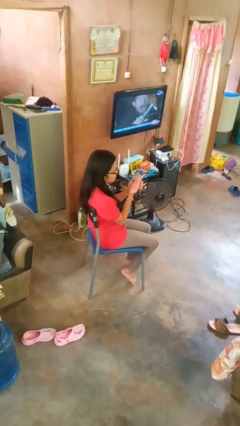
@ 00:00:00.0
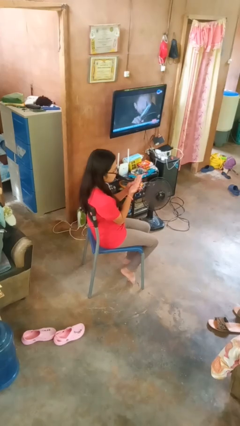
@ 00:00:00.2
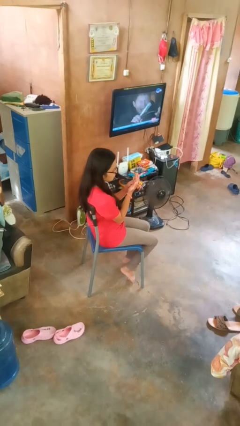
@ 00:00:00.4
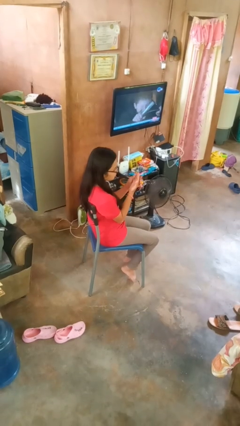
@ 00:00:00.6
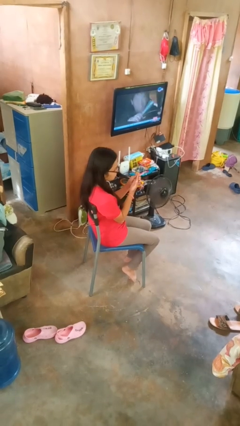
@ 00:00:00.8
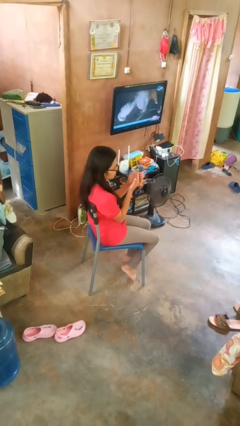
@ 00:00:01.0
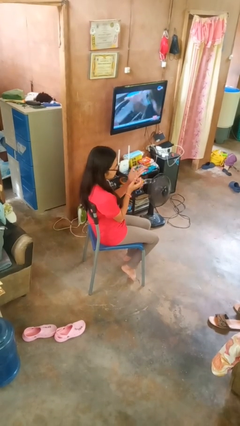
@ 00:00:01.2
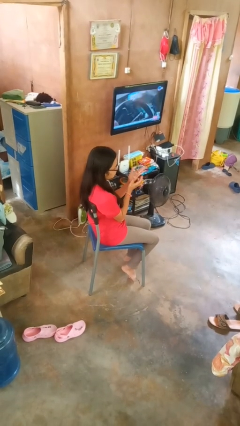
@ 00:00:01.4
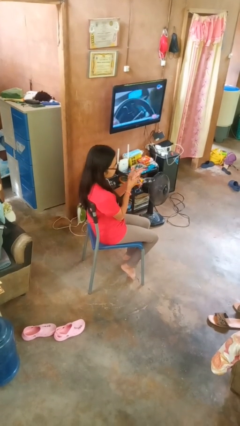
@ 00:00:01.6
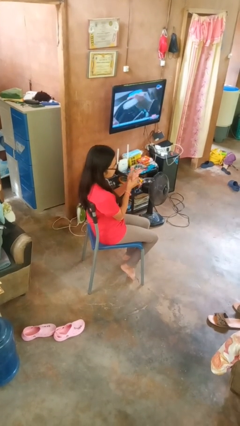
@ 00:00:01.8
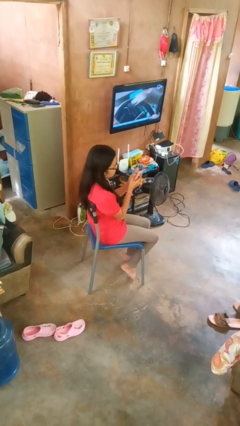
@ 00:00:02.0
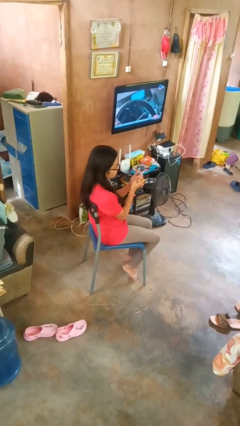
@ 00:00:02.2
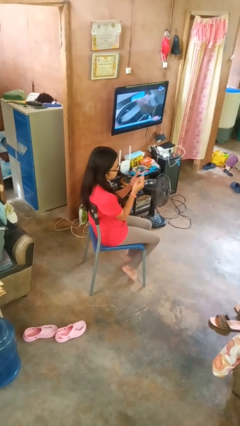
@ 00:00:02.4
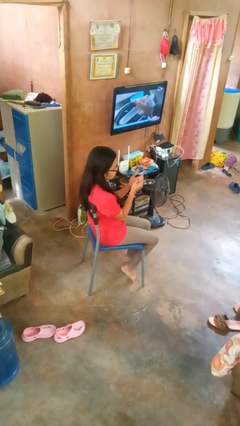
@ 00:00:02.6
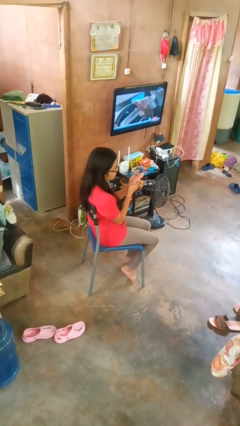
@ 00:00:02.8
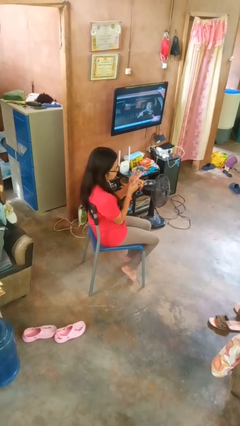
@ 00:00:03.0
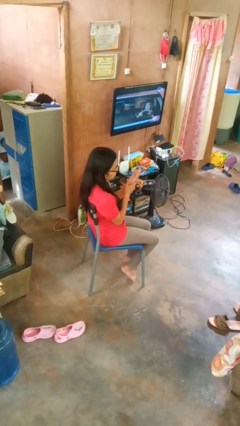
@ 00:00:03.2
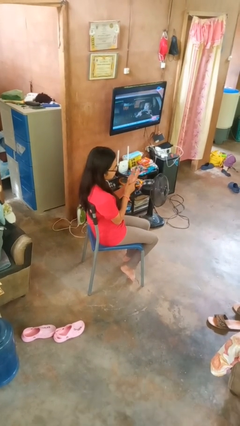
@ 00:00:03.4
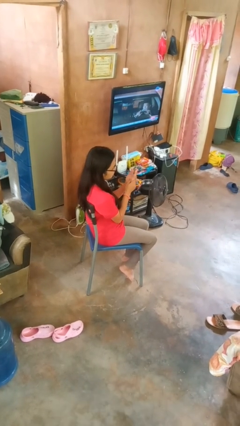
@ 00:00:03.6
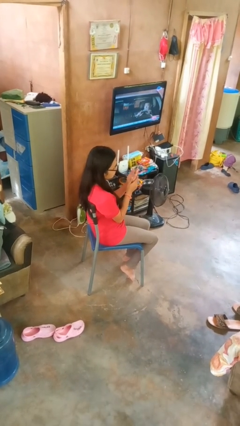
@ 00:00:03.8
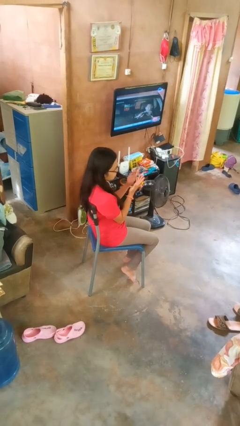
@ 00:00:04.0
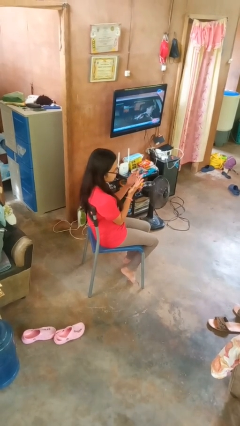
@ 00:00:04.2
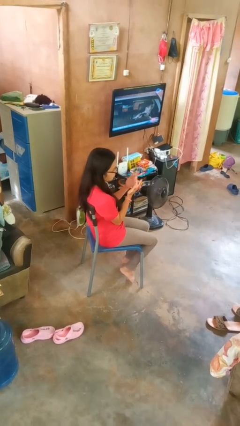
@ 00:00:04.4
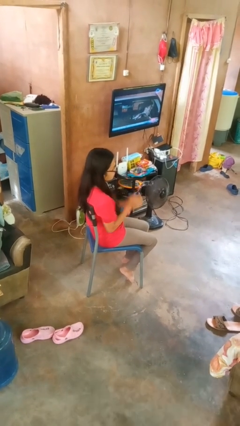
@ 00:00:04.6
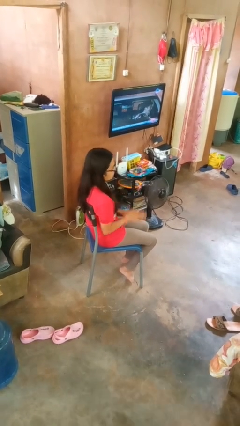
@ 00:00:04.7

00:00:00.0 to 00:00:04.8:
person looks at hands in lap

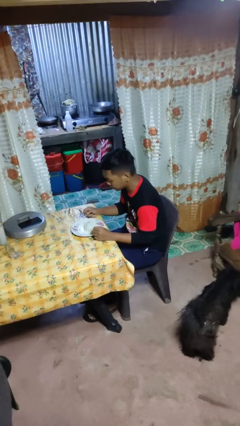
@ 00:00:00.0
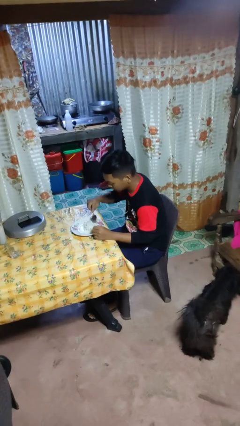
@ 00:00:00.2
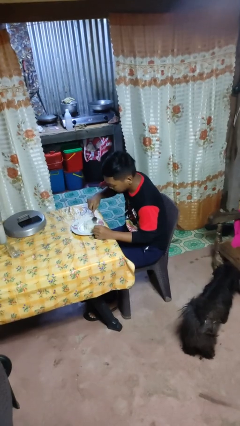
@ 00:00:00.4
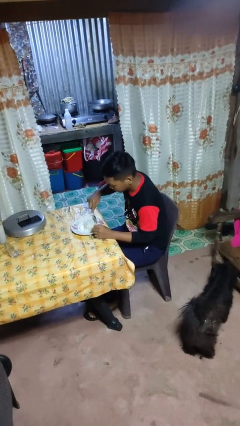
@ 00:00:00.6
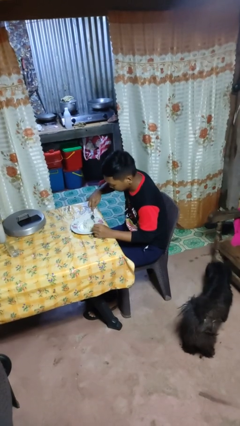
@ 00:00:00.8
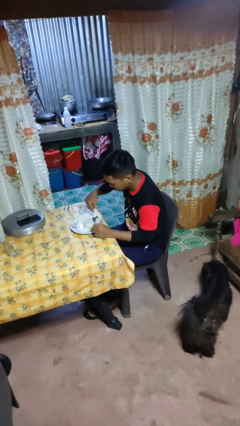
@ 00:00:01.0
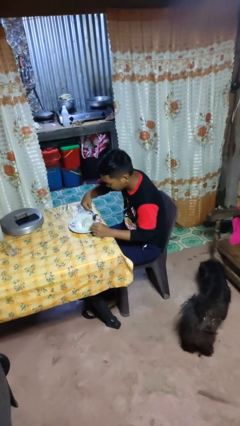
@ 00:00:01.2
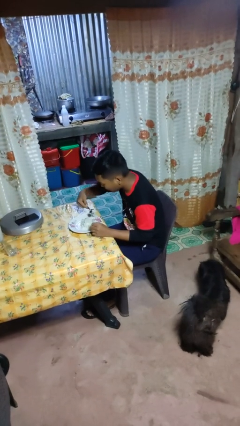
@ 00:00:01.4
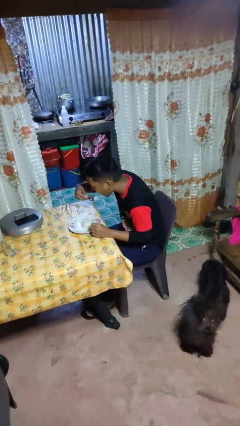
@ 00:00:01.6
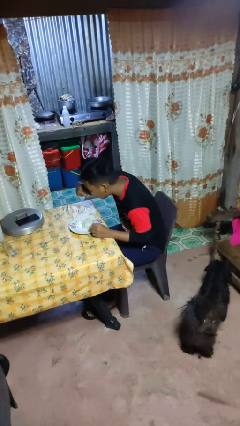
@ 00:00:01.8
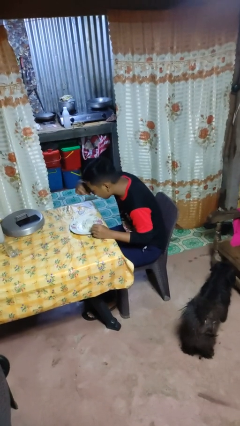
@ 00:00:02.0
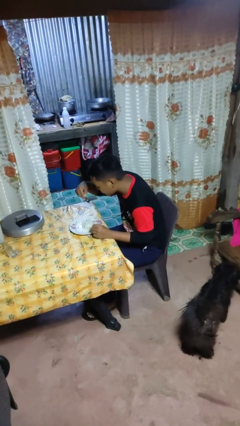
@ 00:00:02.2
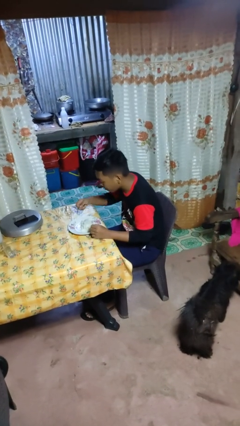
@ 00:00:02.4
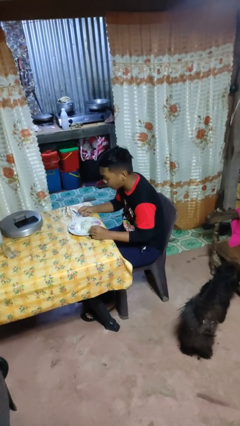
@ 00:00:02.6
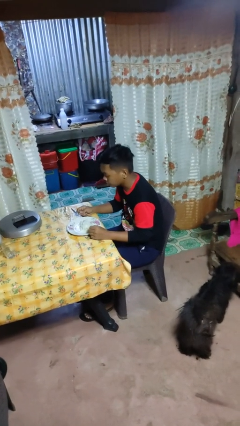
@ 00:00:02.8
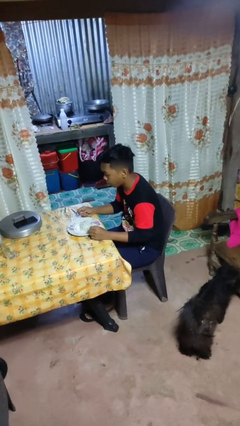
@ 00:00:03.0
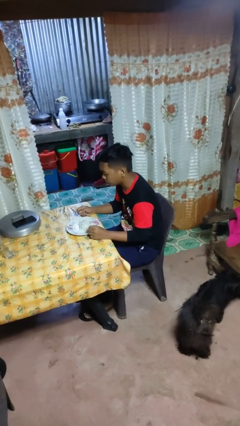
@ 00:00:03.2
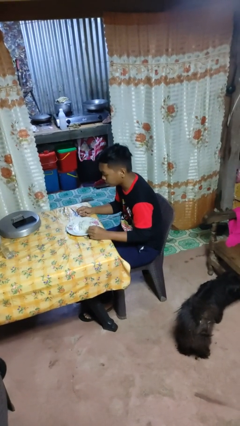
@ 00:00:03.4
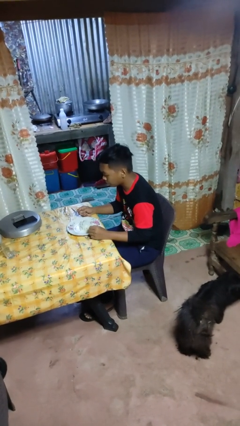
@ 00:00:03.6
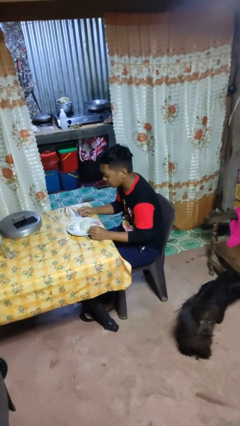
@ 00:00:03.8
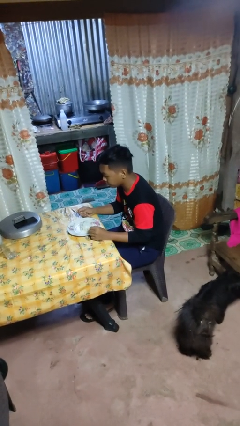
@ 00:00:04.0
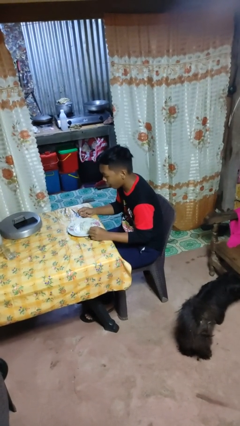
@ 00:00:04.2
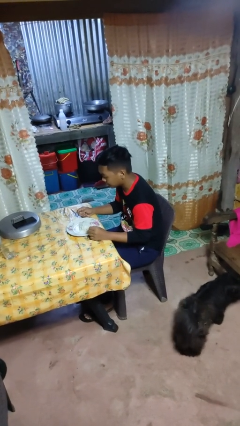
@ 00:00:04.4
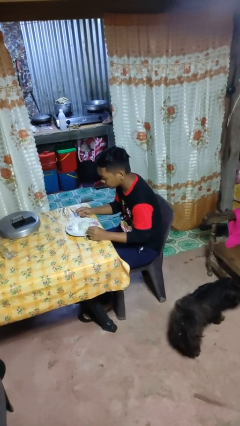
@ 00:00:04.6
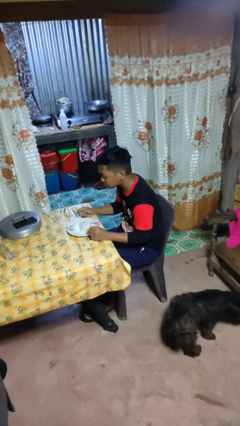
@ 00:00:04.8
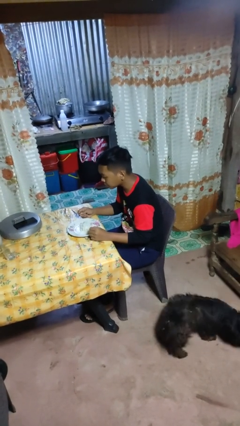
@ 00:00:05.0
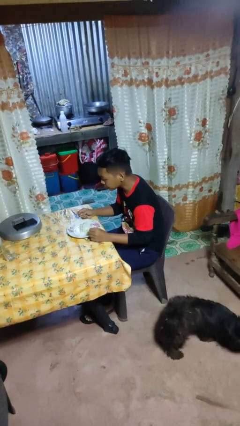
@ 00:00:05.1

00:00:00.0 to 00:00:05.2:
person eats with utensil

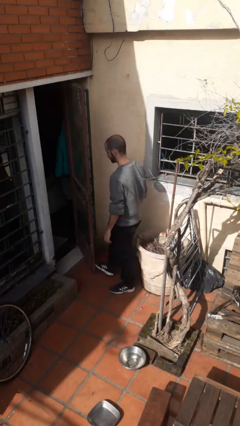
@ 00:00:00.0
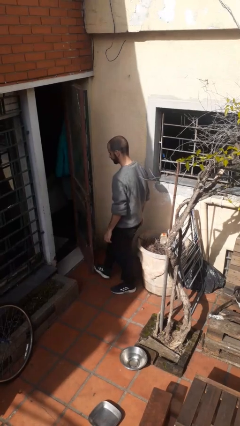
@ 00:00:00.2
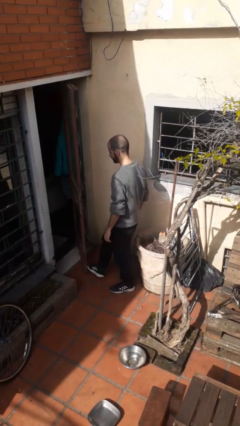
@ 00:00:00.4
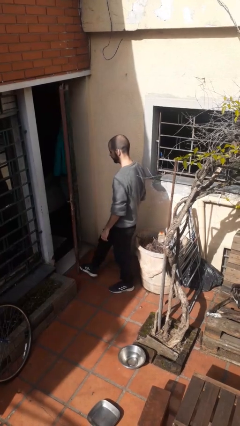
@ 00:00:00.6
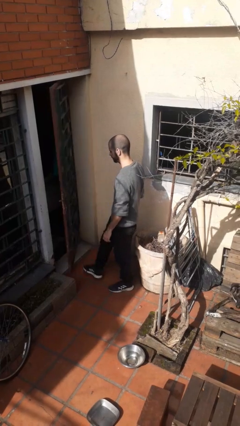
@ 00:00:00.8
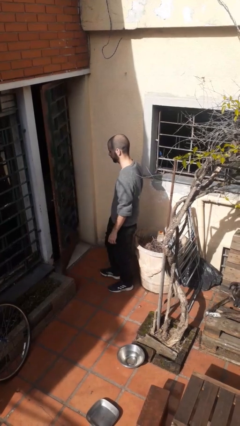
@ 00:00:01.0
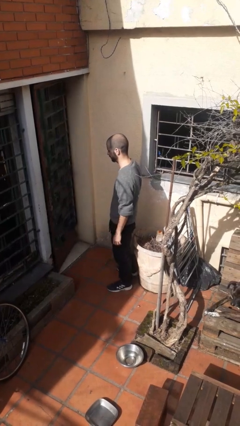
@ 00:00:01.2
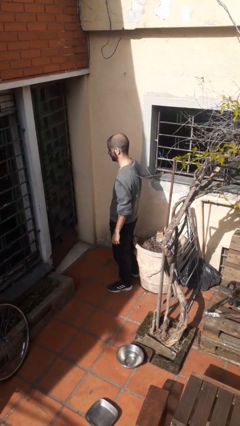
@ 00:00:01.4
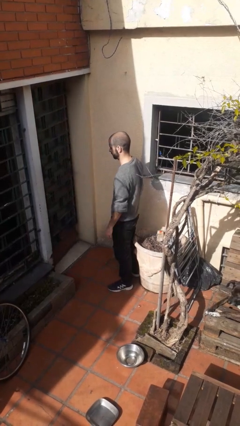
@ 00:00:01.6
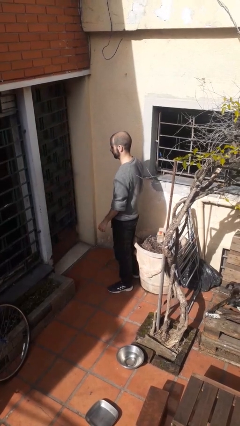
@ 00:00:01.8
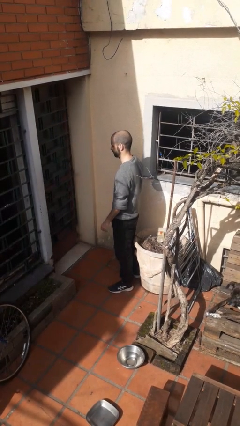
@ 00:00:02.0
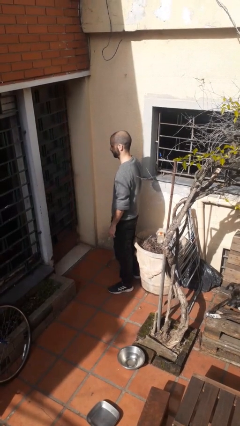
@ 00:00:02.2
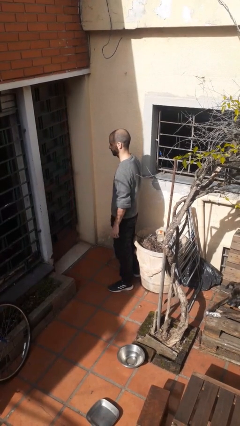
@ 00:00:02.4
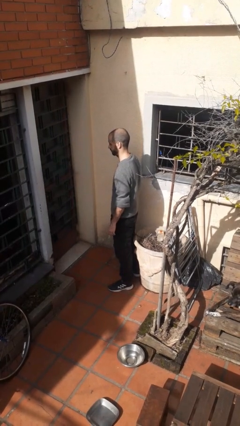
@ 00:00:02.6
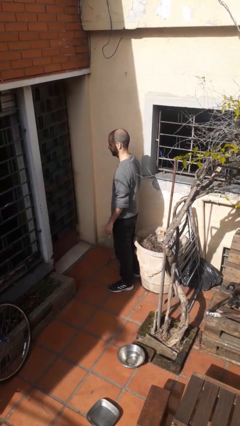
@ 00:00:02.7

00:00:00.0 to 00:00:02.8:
person closes door with foot

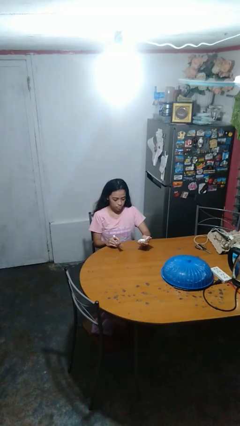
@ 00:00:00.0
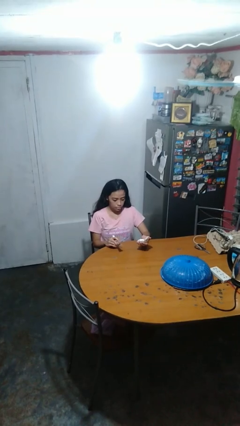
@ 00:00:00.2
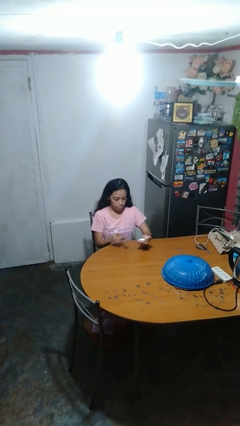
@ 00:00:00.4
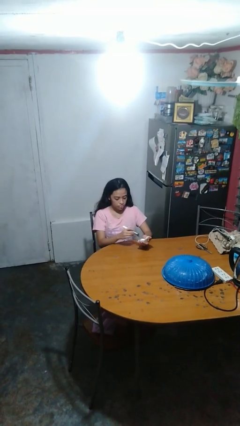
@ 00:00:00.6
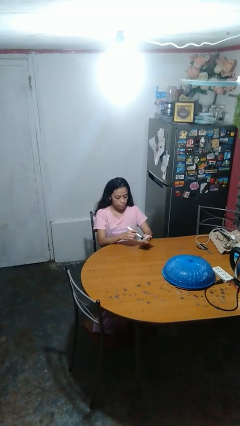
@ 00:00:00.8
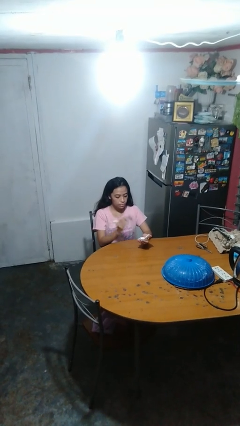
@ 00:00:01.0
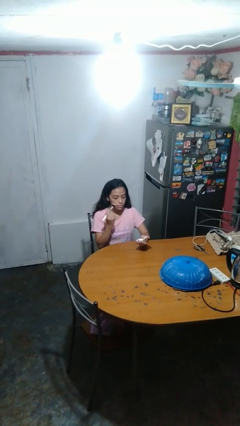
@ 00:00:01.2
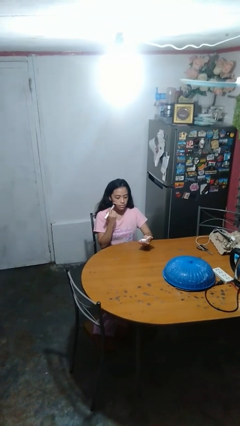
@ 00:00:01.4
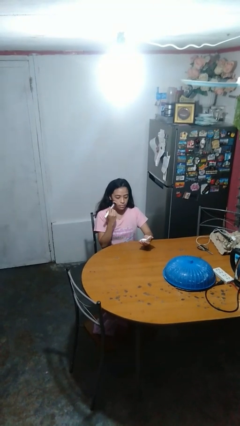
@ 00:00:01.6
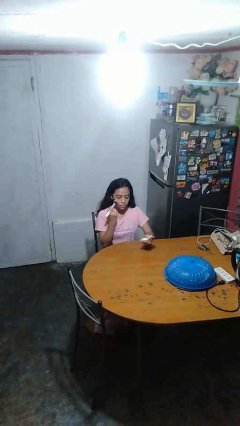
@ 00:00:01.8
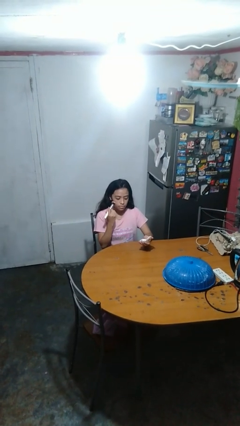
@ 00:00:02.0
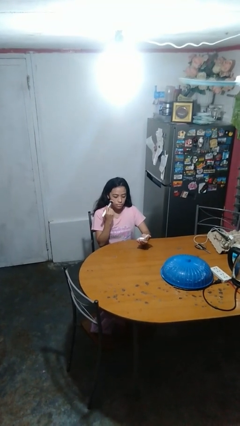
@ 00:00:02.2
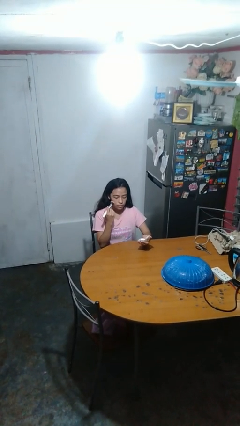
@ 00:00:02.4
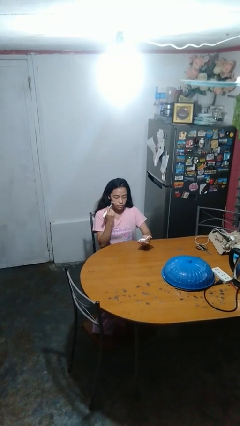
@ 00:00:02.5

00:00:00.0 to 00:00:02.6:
person applies foundation makeup

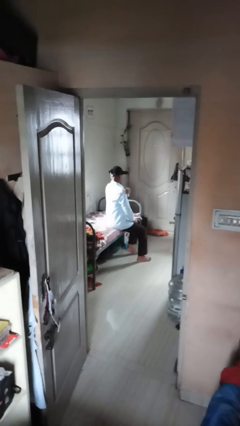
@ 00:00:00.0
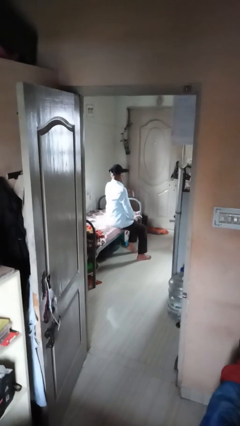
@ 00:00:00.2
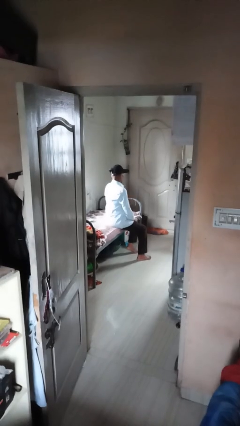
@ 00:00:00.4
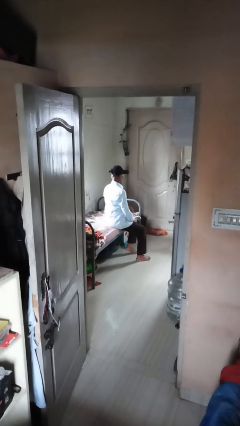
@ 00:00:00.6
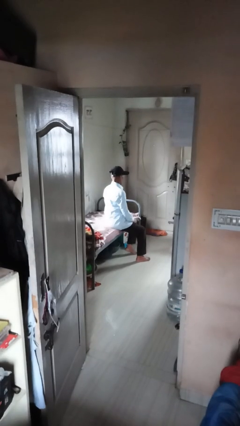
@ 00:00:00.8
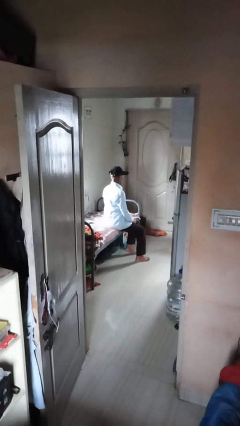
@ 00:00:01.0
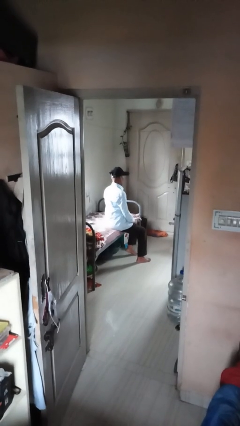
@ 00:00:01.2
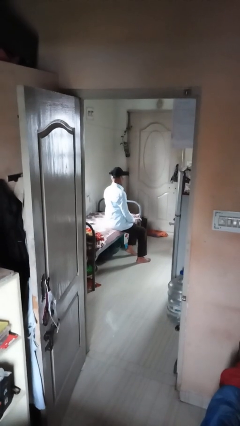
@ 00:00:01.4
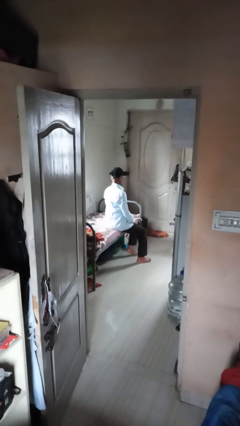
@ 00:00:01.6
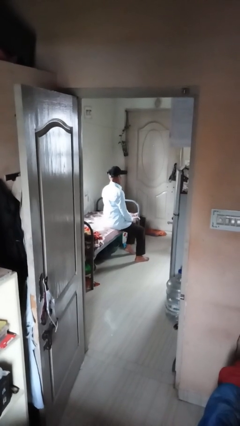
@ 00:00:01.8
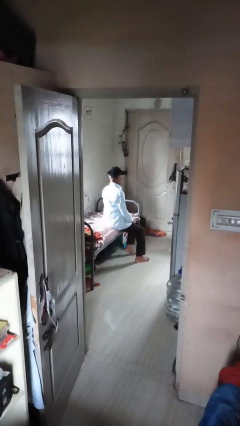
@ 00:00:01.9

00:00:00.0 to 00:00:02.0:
person swats bug
